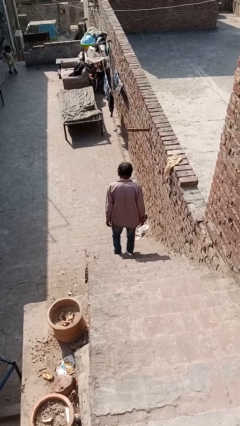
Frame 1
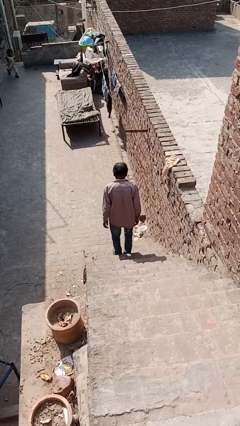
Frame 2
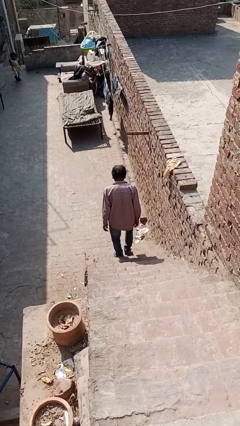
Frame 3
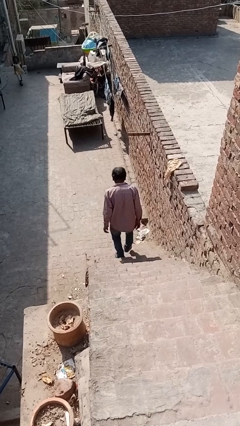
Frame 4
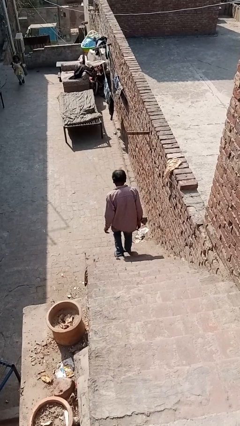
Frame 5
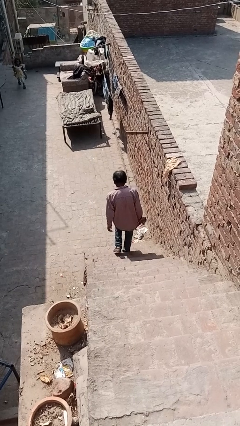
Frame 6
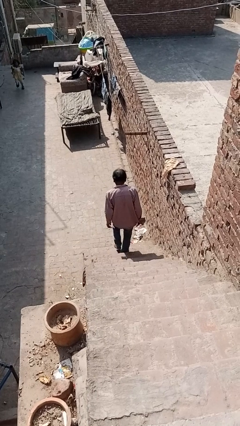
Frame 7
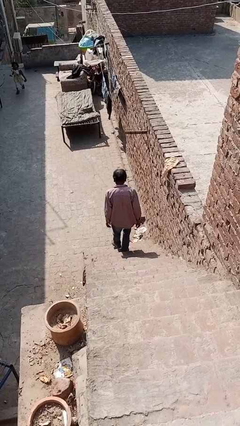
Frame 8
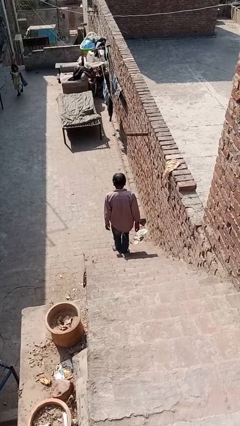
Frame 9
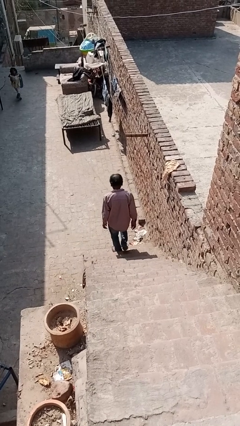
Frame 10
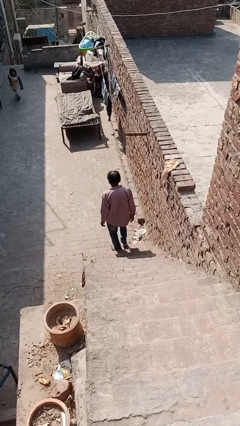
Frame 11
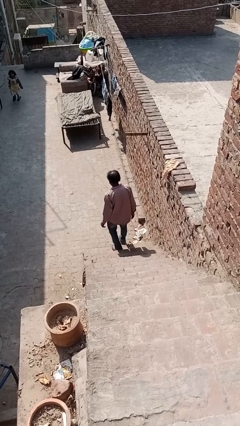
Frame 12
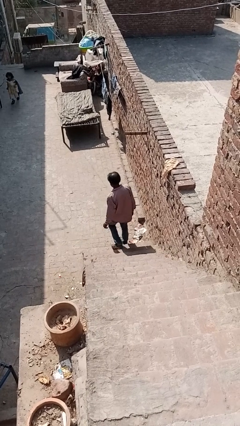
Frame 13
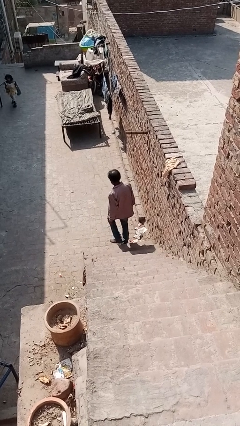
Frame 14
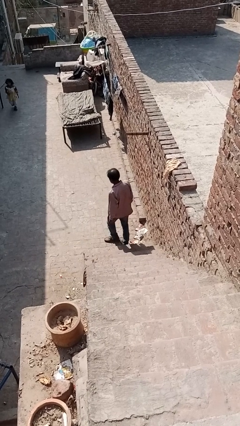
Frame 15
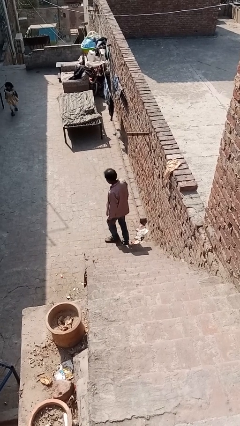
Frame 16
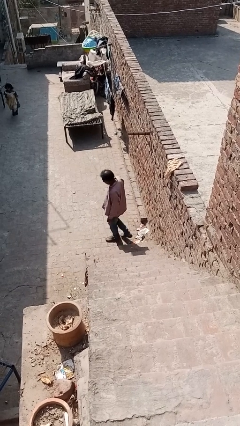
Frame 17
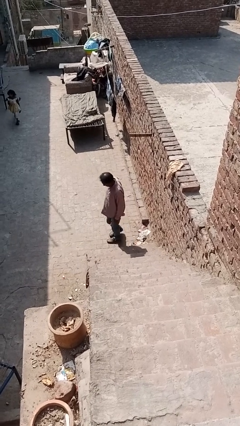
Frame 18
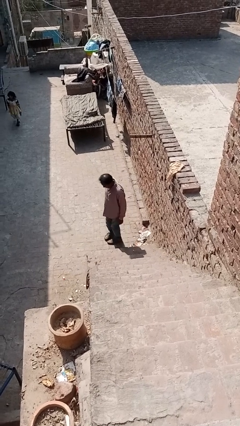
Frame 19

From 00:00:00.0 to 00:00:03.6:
person climbs down stairs

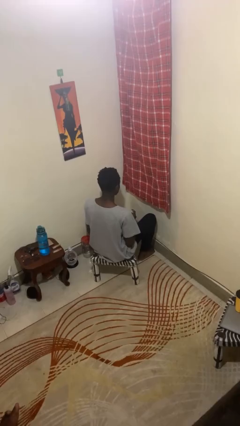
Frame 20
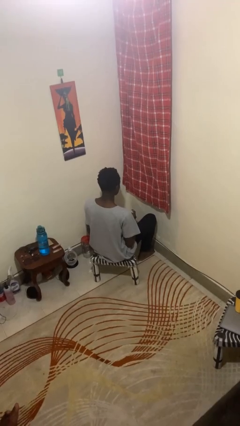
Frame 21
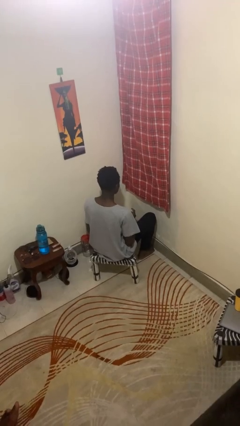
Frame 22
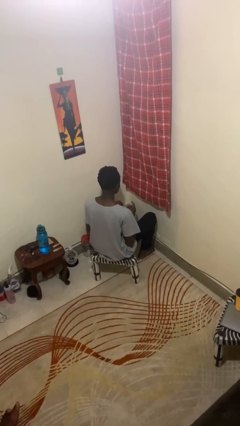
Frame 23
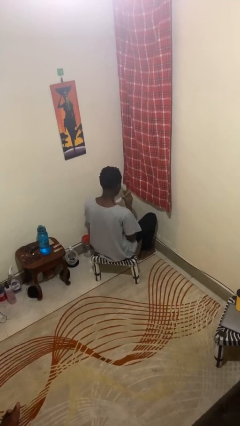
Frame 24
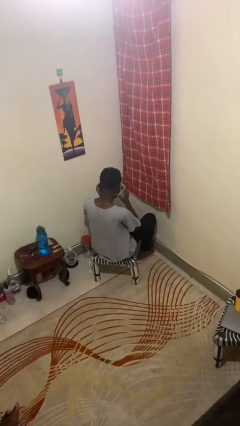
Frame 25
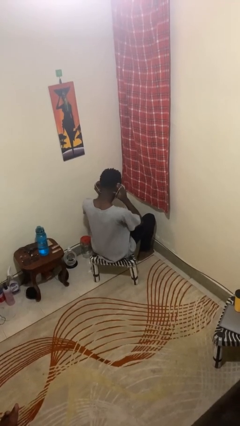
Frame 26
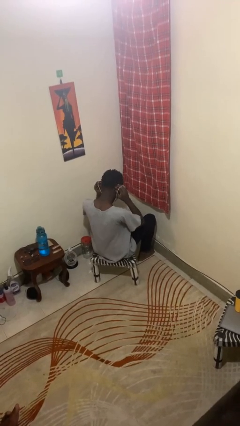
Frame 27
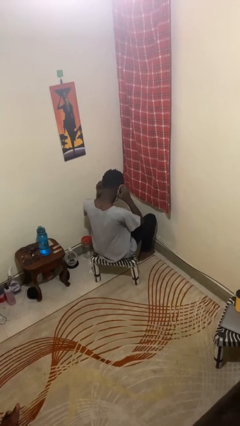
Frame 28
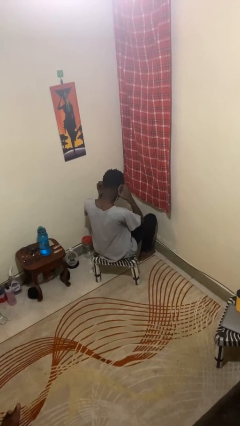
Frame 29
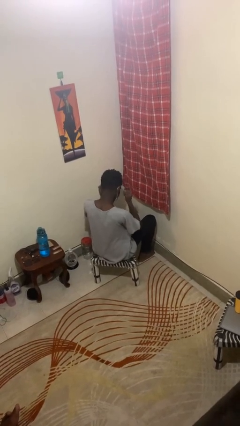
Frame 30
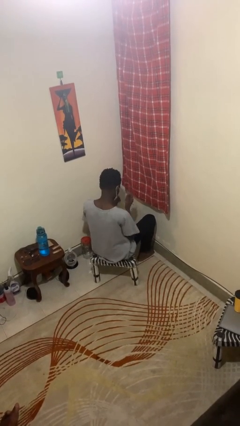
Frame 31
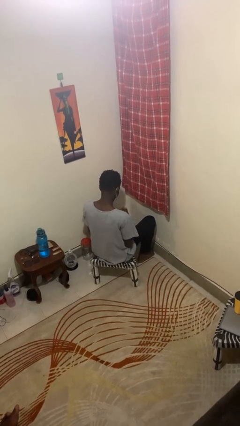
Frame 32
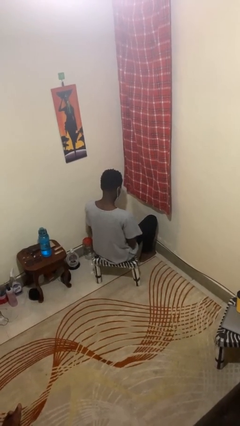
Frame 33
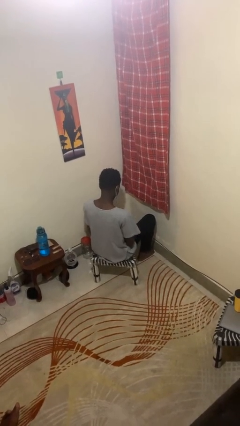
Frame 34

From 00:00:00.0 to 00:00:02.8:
person puts on facemask

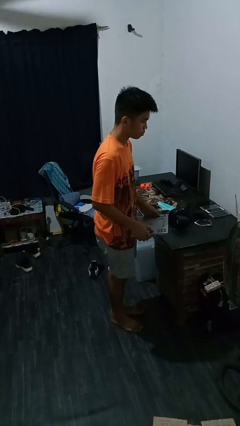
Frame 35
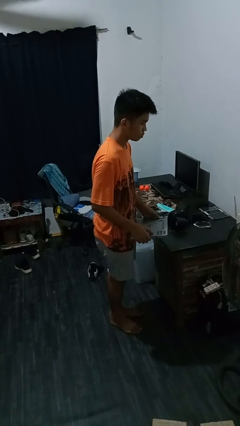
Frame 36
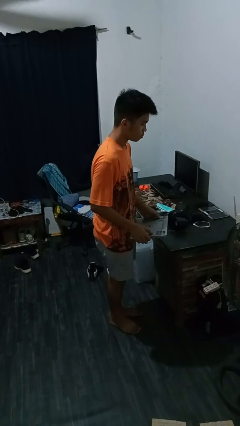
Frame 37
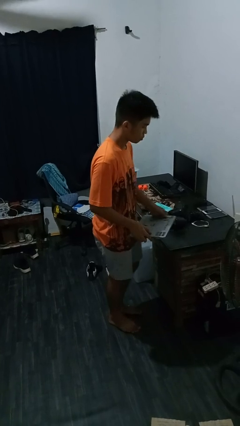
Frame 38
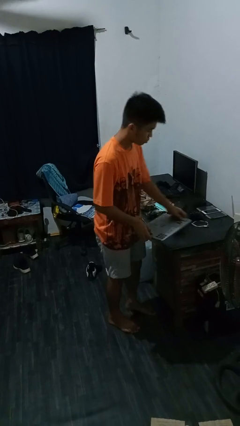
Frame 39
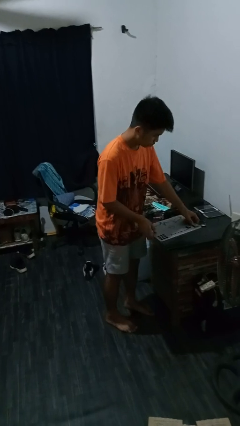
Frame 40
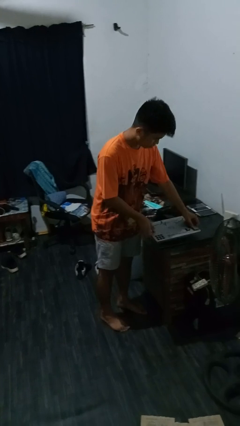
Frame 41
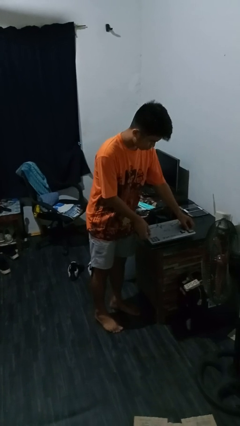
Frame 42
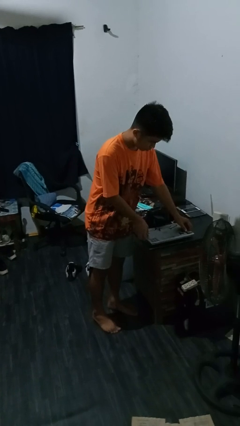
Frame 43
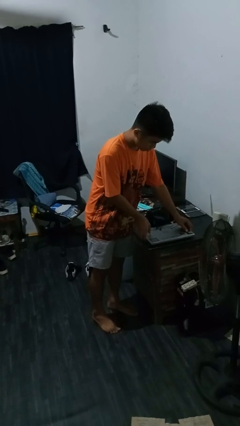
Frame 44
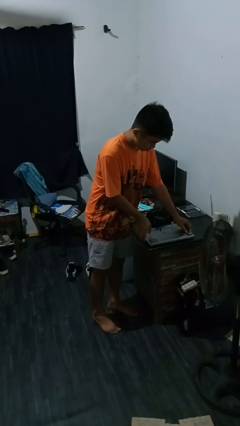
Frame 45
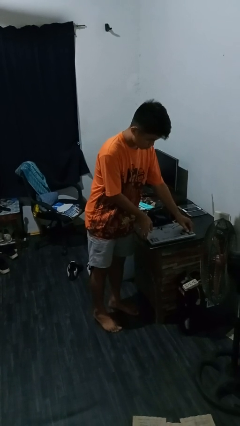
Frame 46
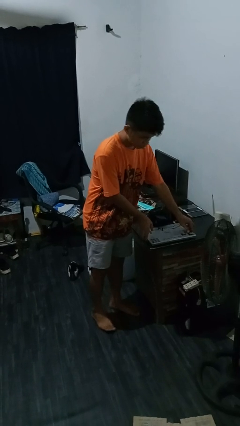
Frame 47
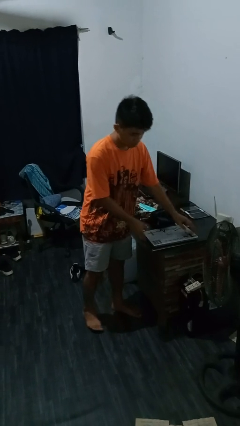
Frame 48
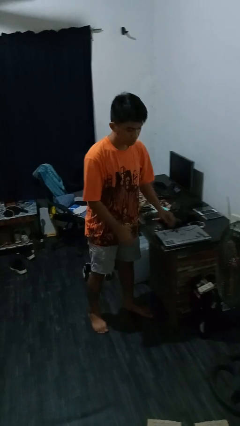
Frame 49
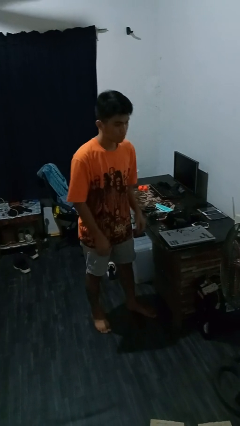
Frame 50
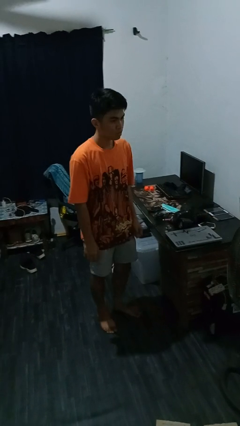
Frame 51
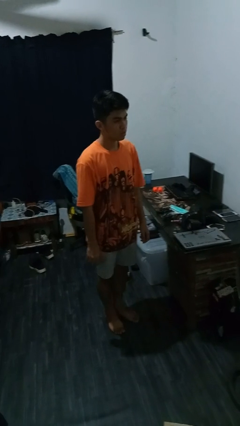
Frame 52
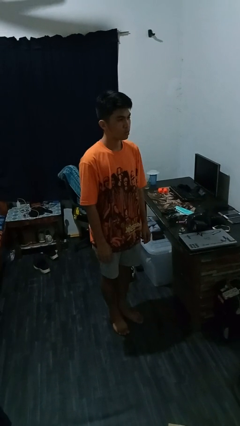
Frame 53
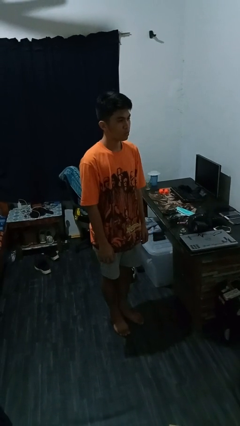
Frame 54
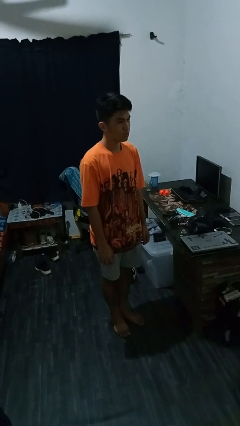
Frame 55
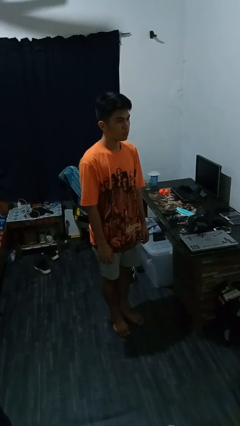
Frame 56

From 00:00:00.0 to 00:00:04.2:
person puts down object on countertop

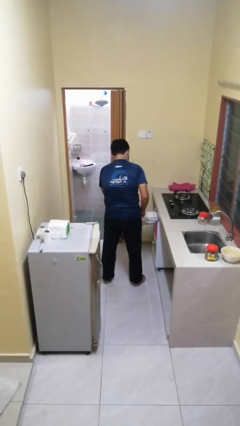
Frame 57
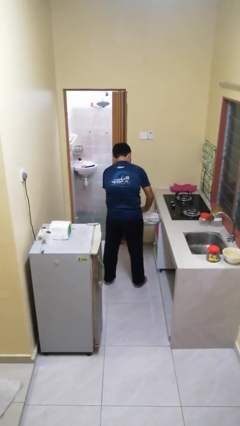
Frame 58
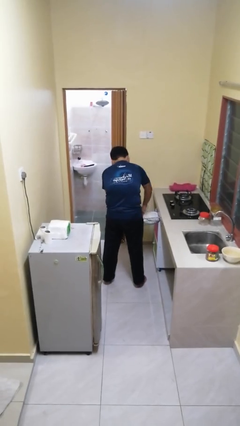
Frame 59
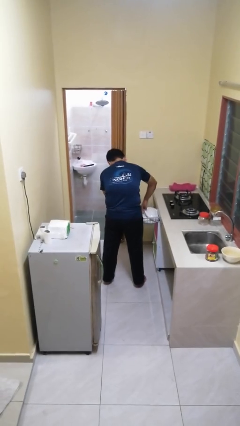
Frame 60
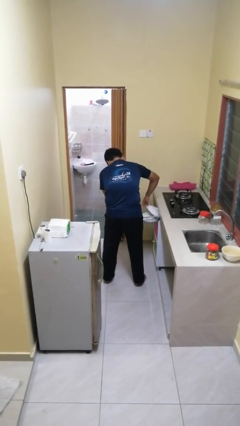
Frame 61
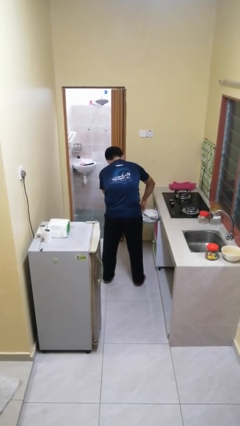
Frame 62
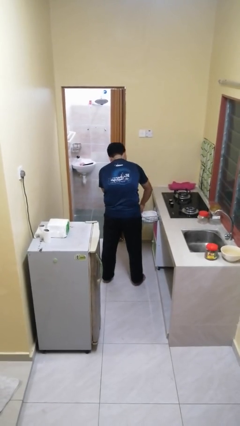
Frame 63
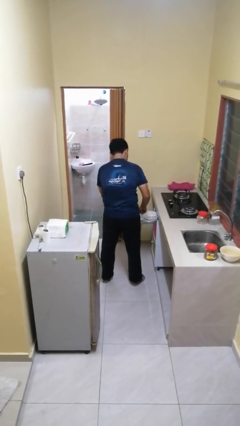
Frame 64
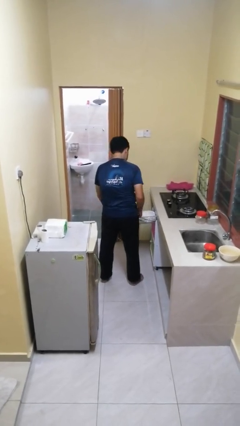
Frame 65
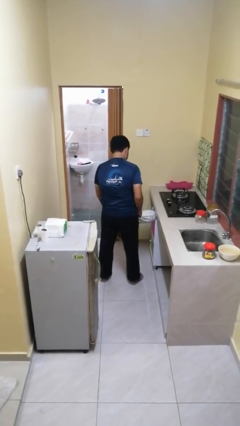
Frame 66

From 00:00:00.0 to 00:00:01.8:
person searches in kitchen drawer

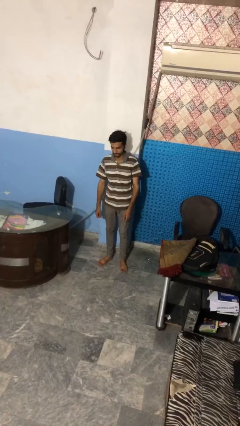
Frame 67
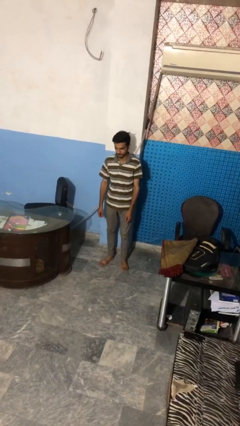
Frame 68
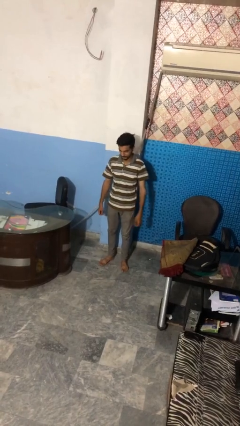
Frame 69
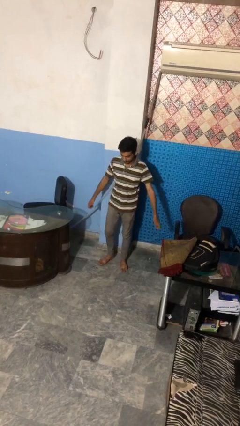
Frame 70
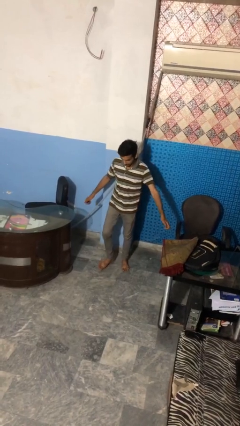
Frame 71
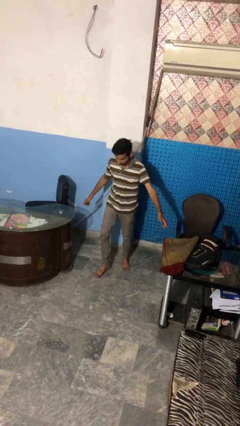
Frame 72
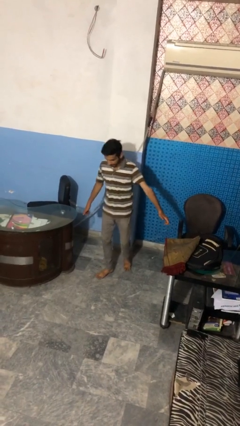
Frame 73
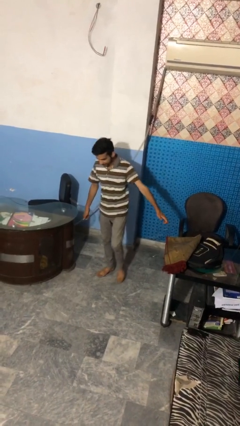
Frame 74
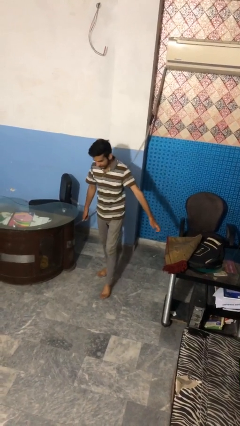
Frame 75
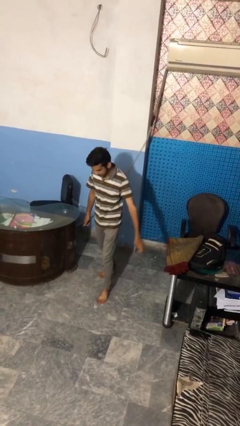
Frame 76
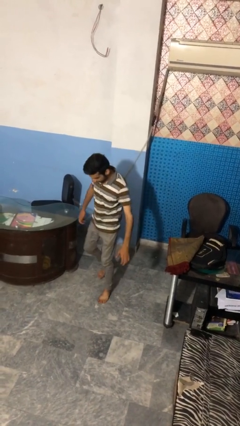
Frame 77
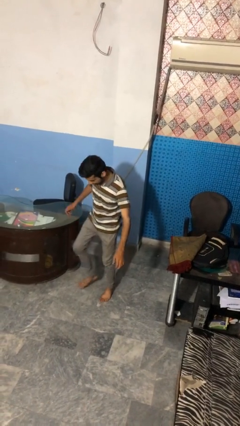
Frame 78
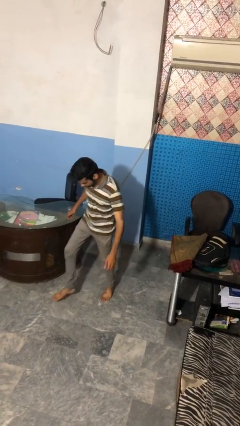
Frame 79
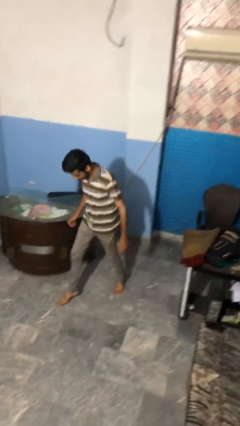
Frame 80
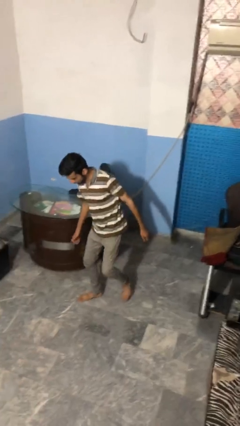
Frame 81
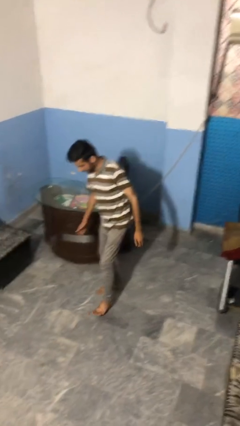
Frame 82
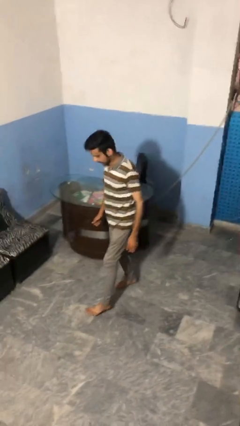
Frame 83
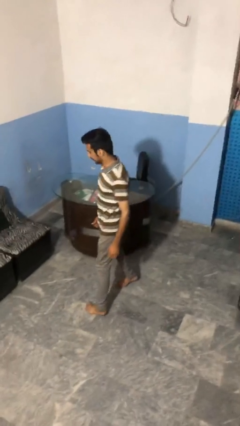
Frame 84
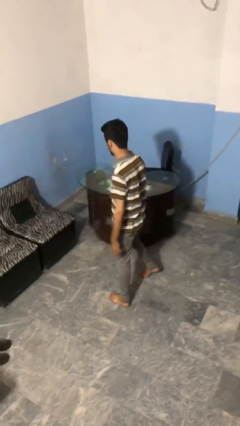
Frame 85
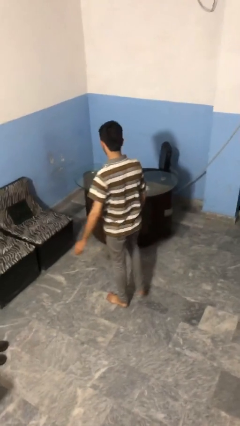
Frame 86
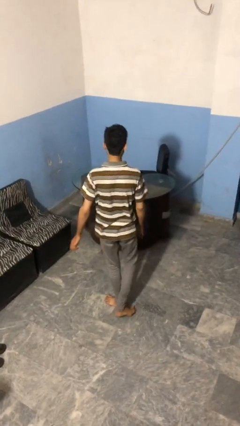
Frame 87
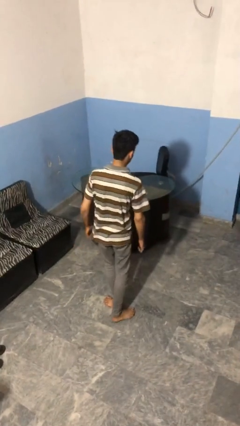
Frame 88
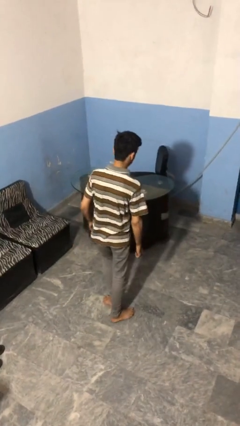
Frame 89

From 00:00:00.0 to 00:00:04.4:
person walks tiptoe

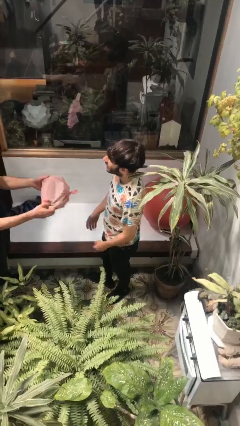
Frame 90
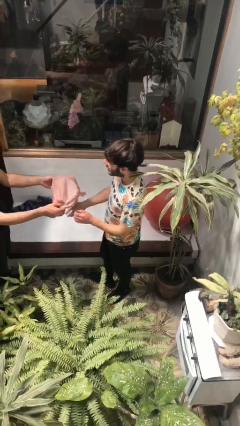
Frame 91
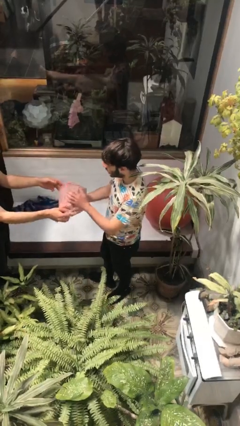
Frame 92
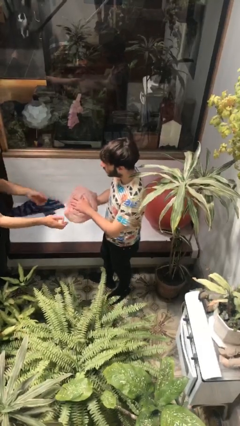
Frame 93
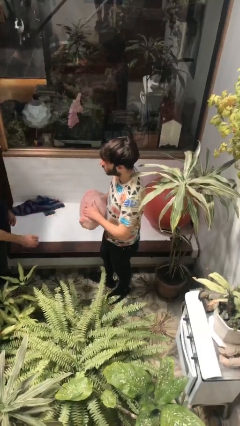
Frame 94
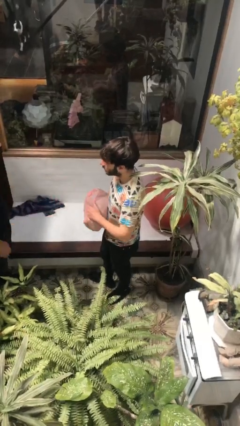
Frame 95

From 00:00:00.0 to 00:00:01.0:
person transfers object to person
